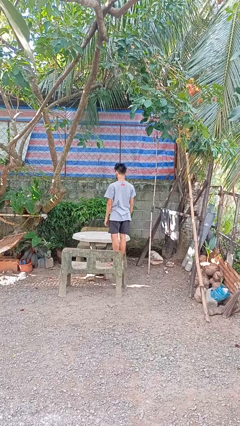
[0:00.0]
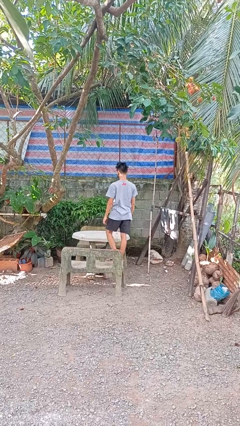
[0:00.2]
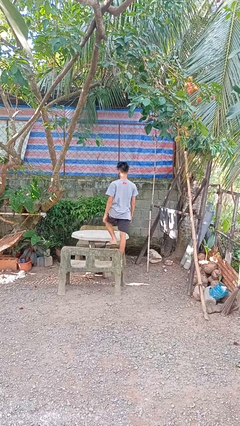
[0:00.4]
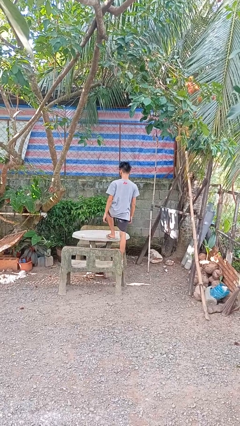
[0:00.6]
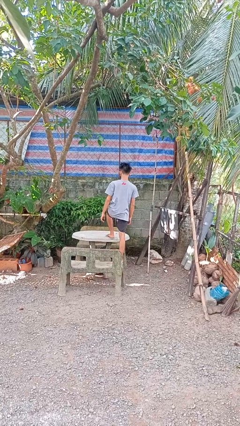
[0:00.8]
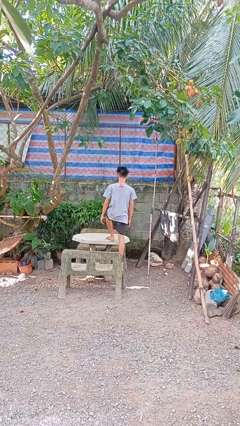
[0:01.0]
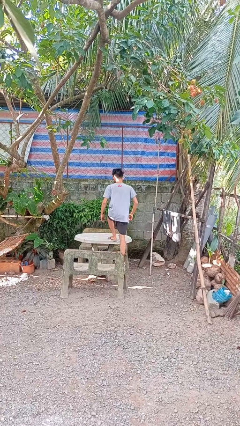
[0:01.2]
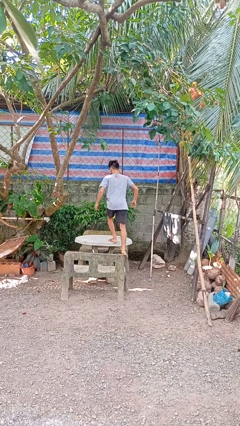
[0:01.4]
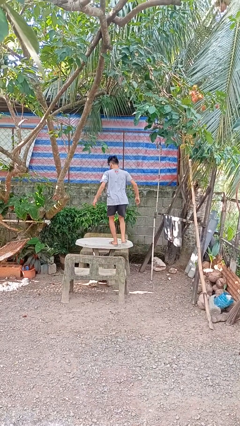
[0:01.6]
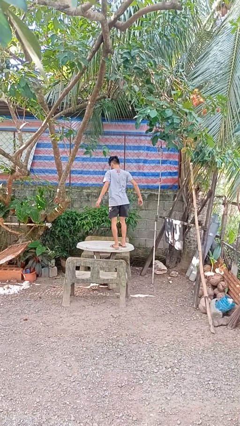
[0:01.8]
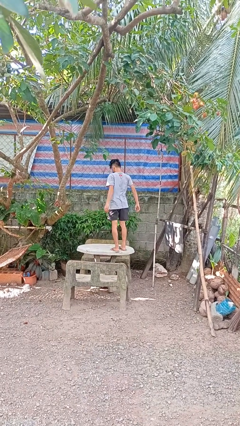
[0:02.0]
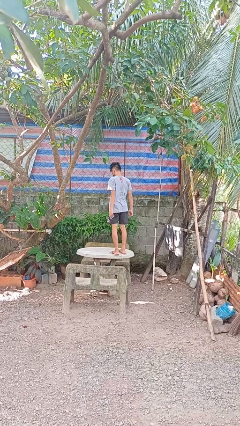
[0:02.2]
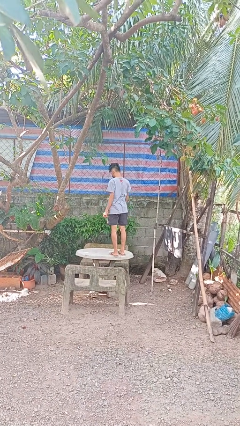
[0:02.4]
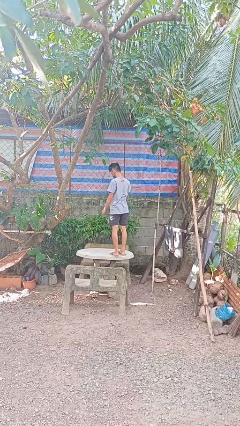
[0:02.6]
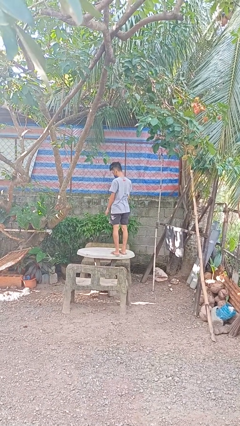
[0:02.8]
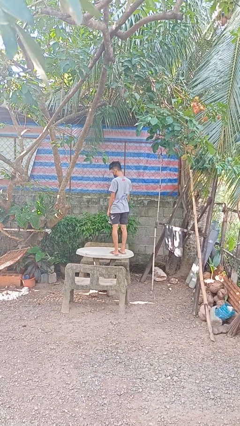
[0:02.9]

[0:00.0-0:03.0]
person climbs on table

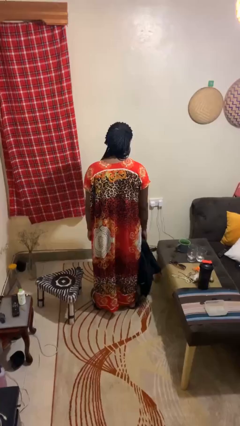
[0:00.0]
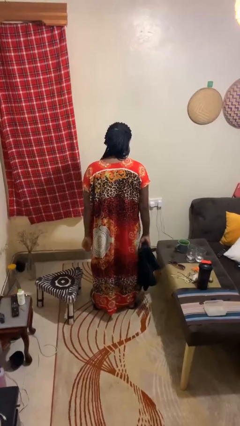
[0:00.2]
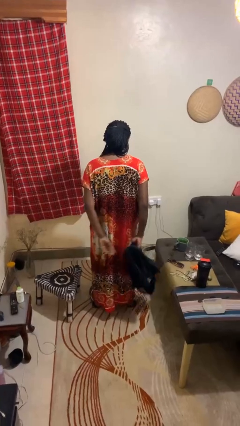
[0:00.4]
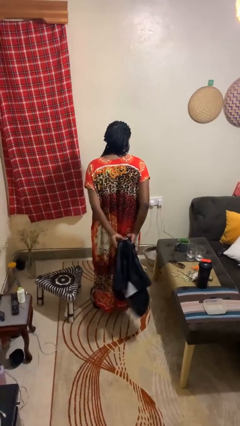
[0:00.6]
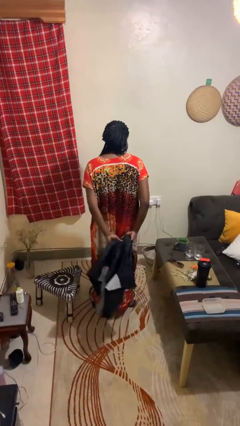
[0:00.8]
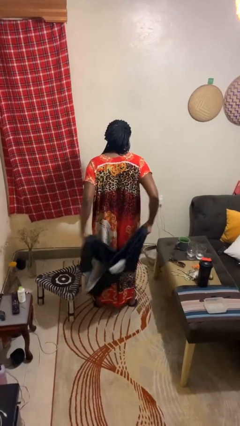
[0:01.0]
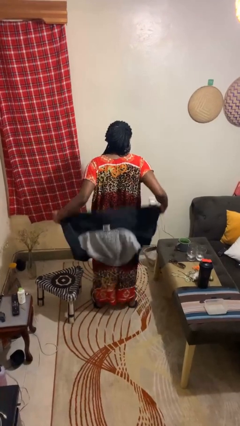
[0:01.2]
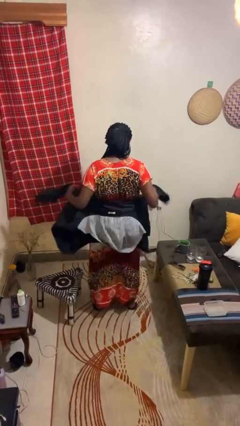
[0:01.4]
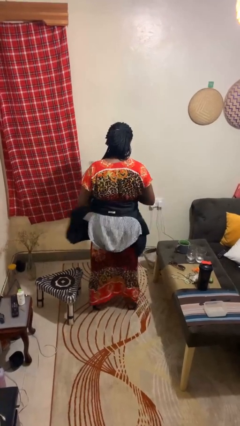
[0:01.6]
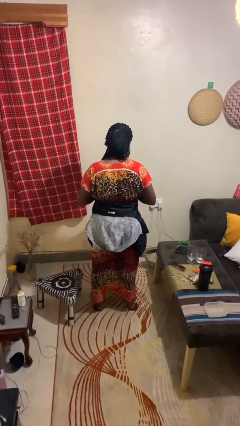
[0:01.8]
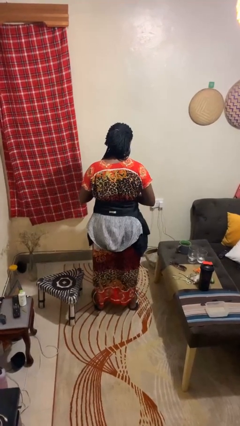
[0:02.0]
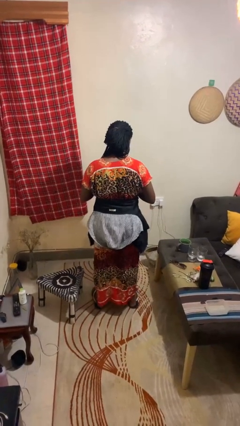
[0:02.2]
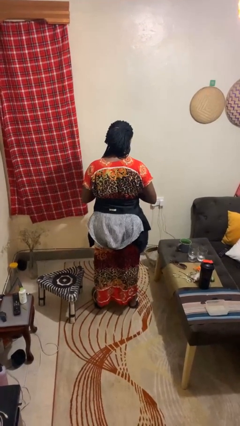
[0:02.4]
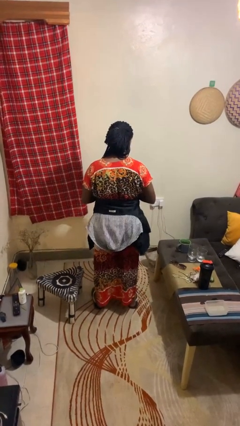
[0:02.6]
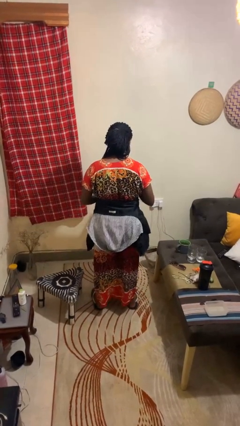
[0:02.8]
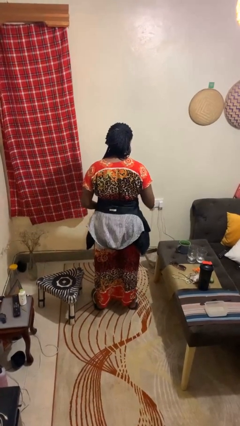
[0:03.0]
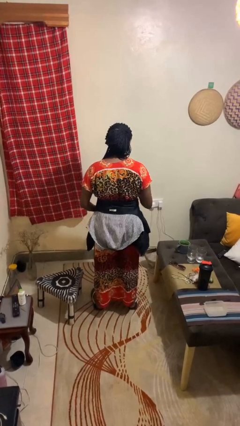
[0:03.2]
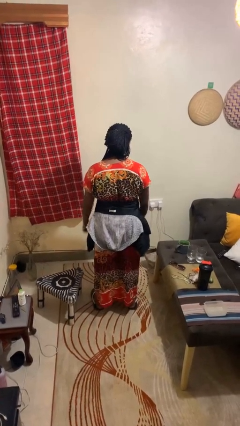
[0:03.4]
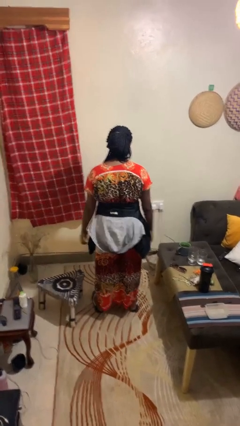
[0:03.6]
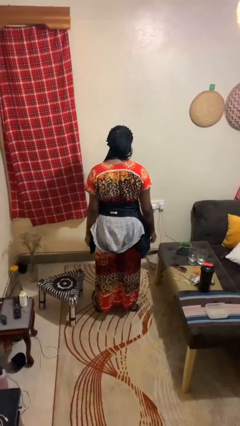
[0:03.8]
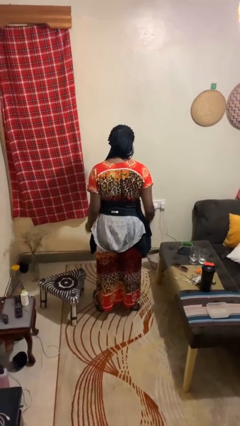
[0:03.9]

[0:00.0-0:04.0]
person ties jacket around waist

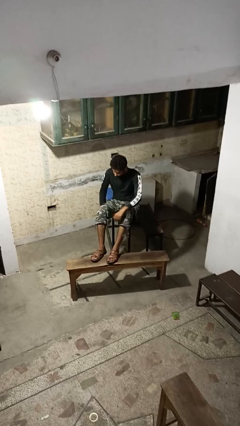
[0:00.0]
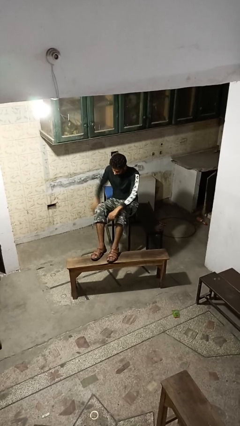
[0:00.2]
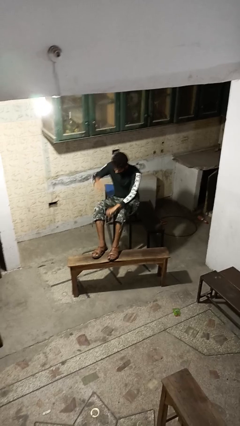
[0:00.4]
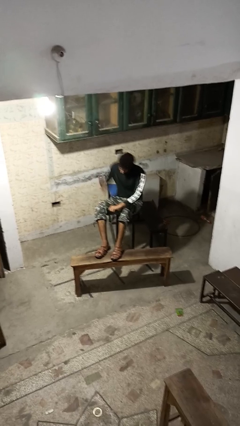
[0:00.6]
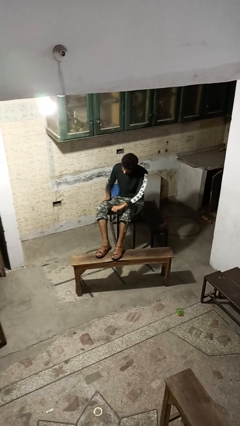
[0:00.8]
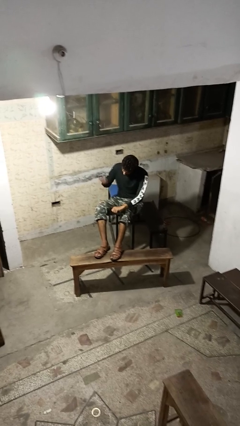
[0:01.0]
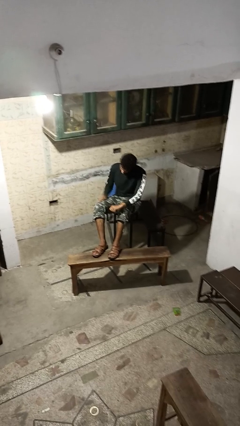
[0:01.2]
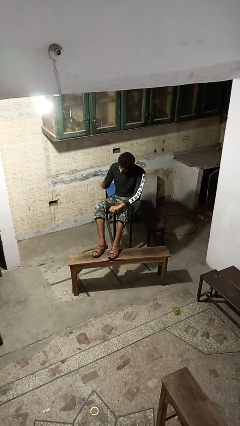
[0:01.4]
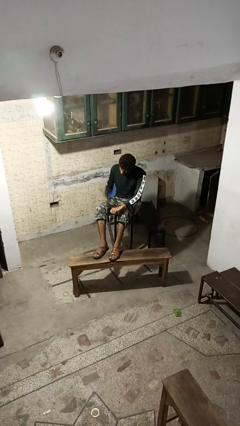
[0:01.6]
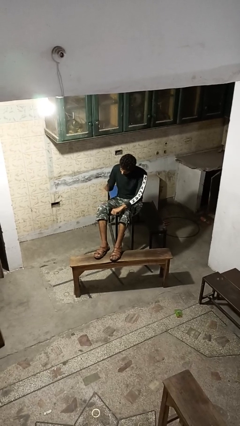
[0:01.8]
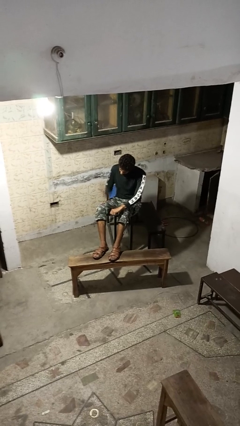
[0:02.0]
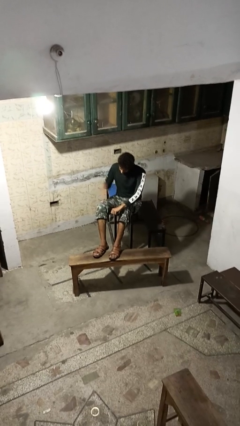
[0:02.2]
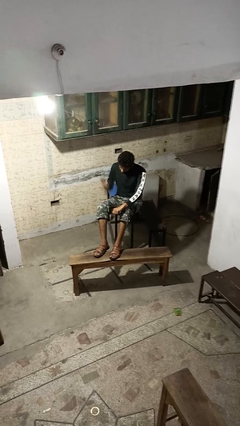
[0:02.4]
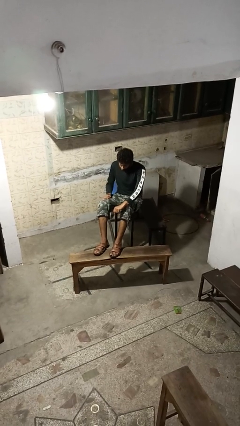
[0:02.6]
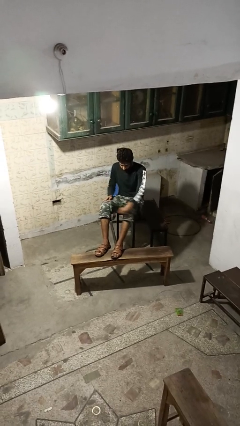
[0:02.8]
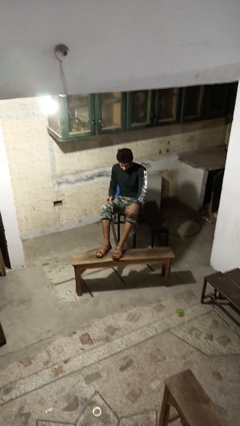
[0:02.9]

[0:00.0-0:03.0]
person slaps hands on thighs

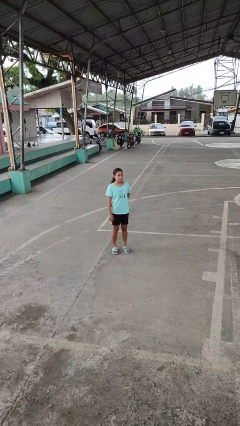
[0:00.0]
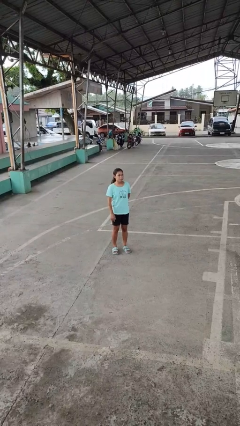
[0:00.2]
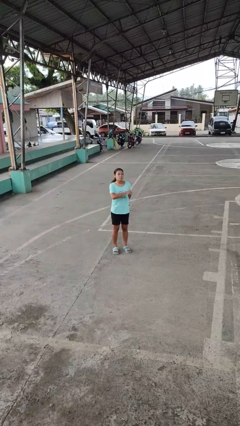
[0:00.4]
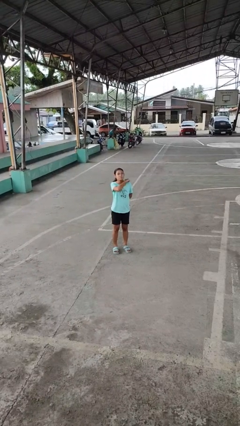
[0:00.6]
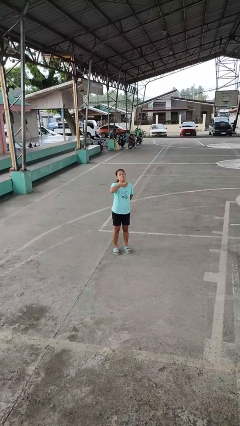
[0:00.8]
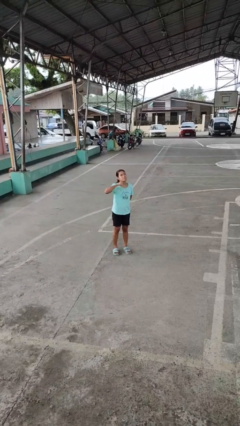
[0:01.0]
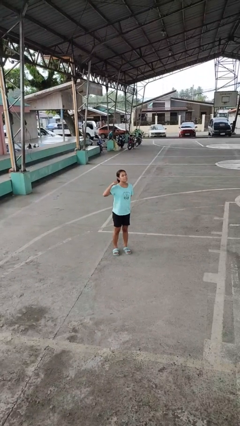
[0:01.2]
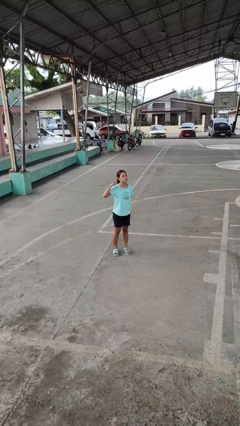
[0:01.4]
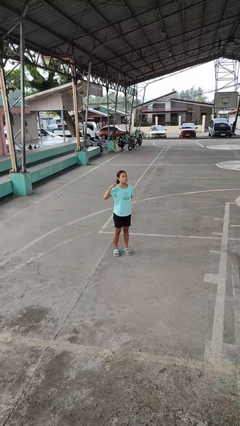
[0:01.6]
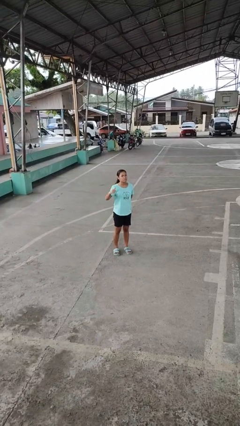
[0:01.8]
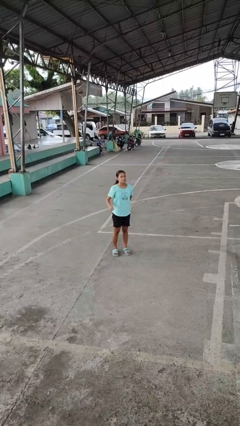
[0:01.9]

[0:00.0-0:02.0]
person gestures cut

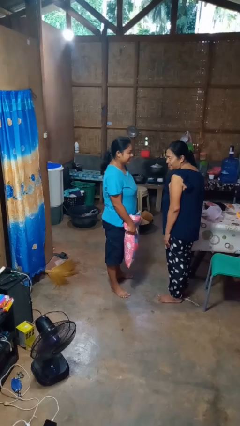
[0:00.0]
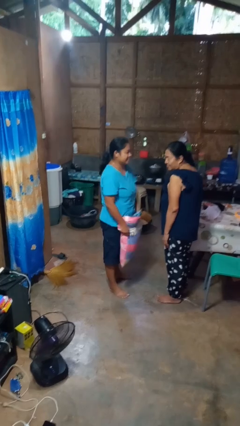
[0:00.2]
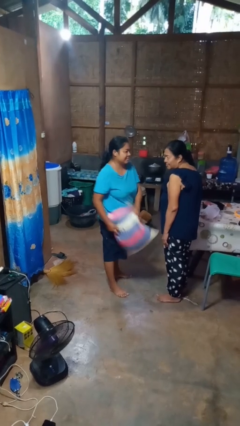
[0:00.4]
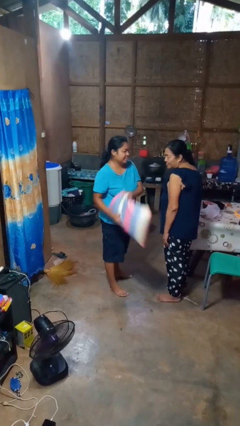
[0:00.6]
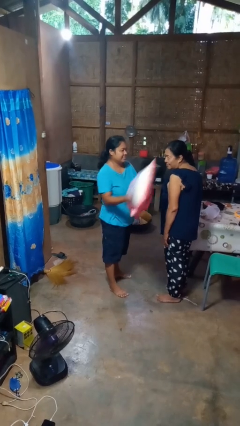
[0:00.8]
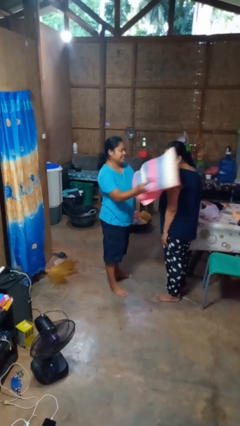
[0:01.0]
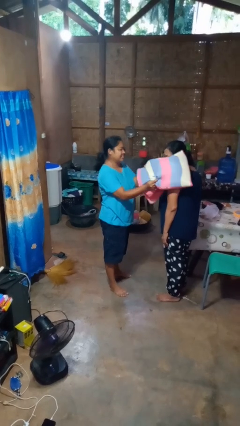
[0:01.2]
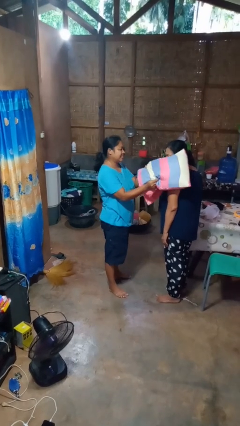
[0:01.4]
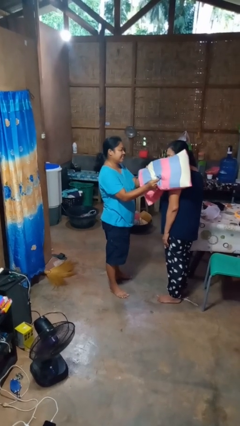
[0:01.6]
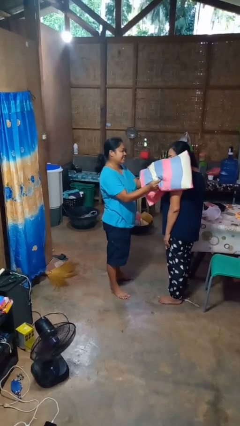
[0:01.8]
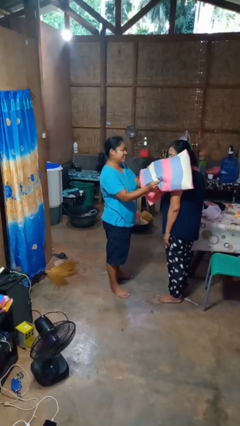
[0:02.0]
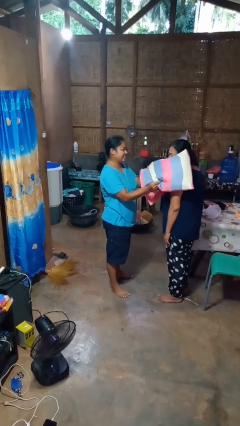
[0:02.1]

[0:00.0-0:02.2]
person hits person with pillow

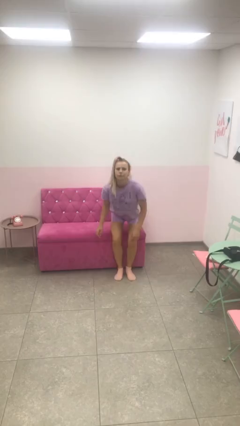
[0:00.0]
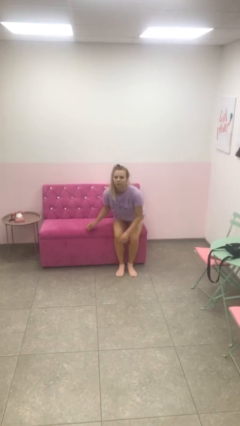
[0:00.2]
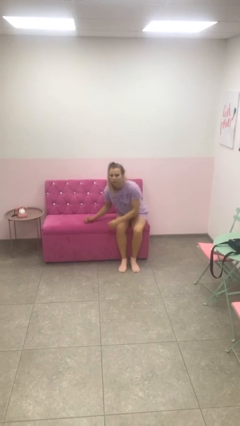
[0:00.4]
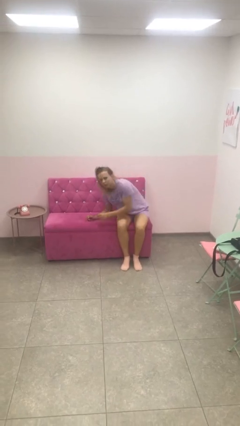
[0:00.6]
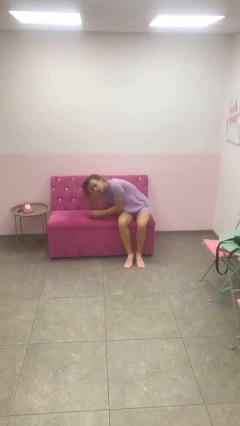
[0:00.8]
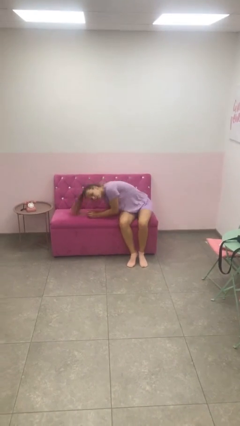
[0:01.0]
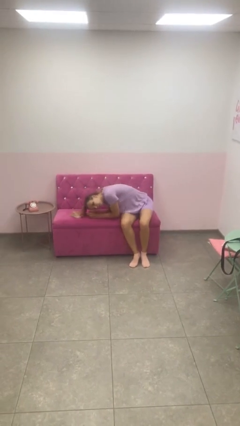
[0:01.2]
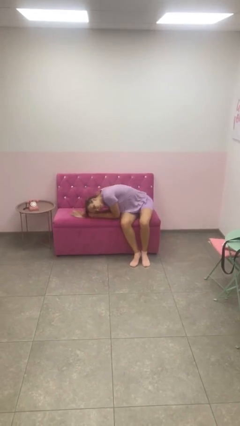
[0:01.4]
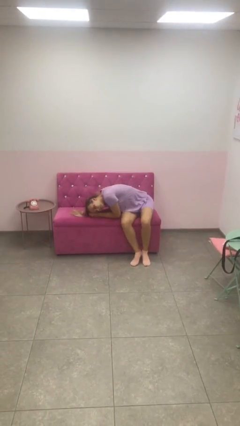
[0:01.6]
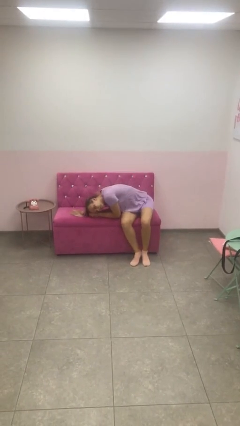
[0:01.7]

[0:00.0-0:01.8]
person lies down on couch

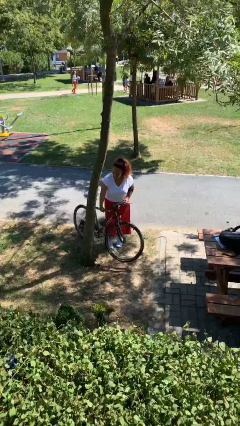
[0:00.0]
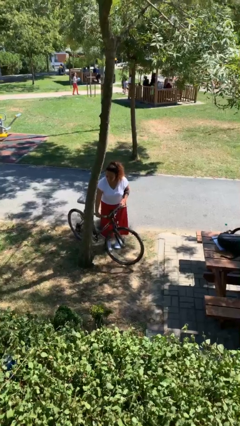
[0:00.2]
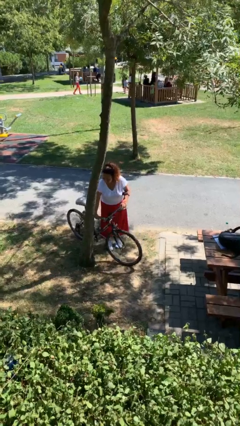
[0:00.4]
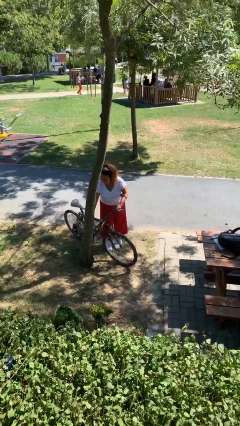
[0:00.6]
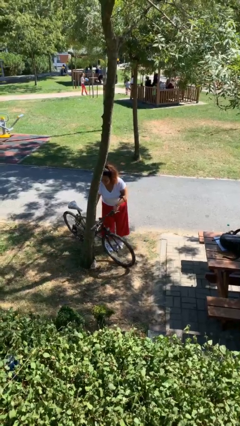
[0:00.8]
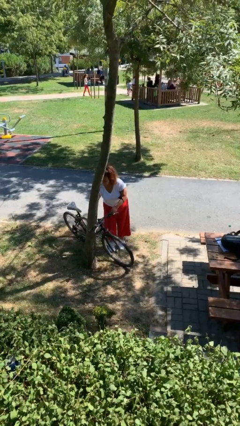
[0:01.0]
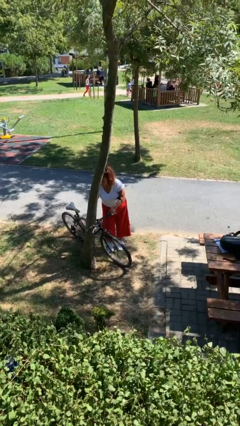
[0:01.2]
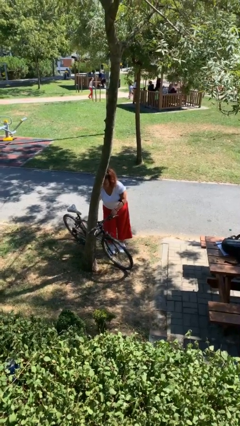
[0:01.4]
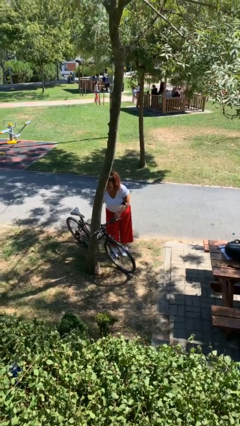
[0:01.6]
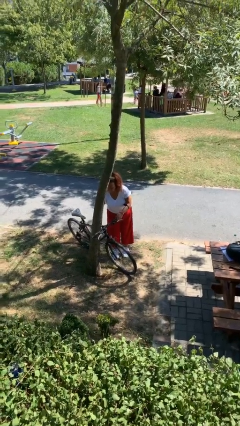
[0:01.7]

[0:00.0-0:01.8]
person puts down object on floor
